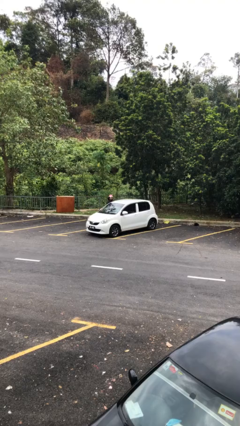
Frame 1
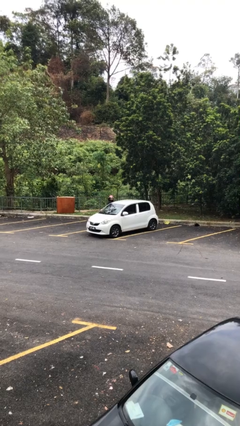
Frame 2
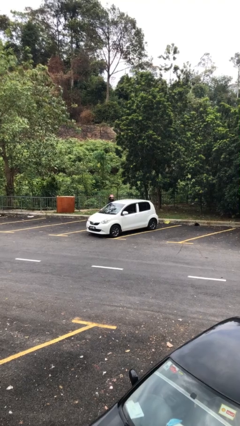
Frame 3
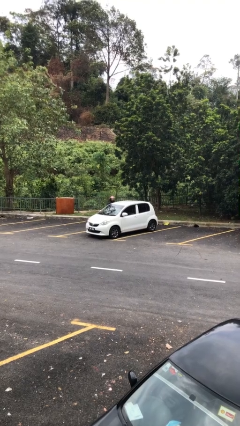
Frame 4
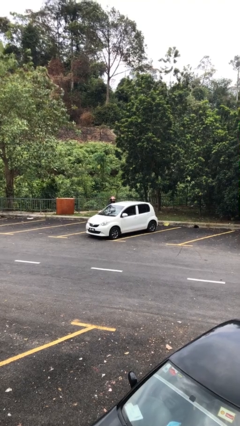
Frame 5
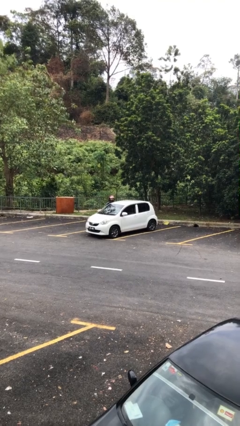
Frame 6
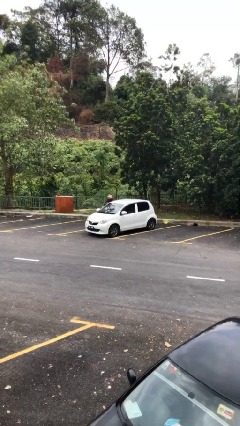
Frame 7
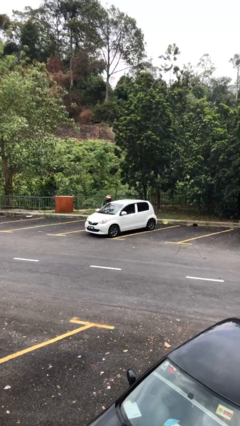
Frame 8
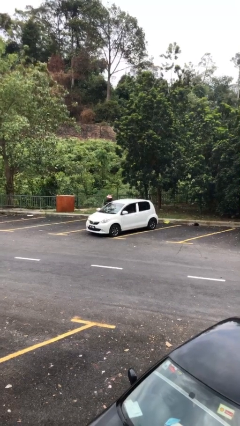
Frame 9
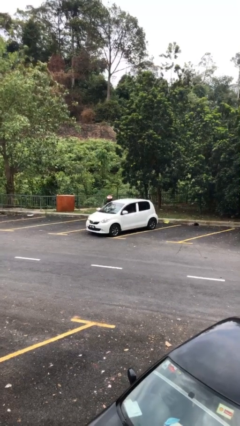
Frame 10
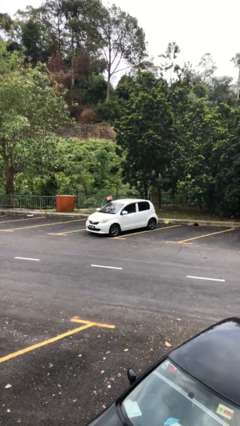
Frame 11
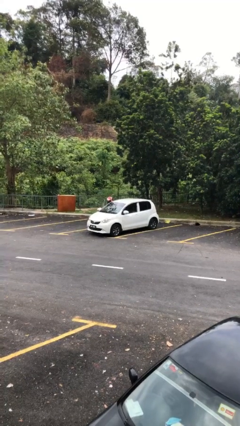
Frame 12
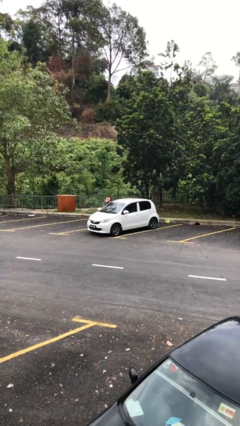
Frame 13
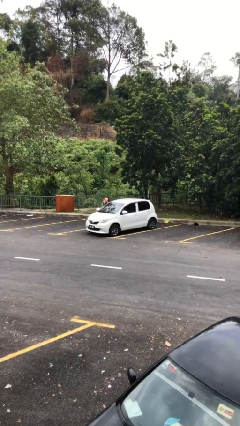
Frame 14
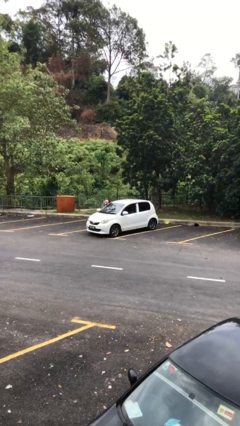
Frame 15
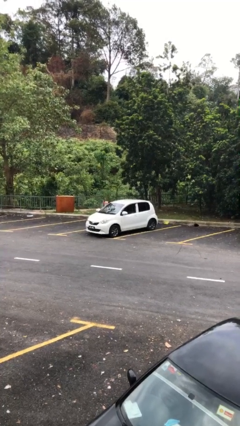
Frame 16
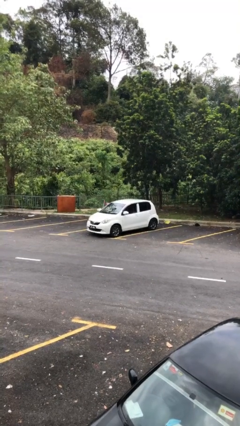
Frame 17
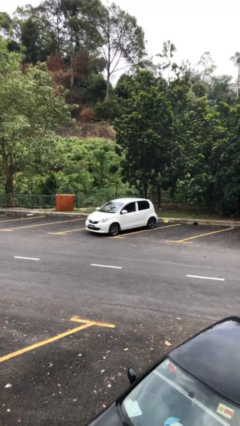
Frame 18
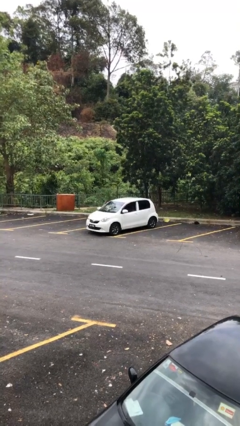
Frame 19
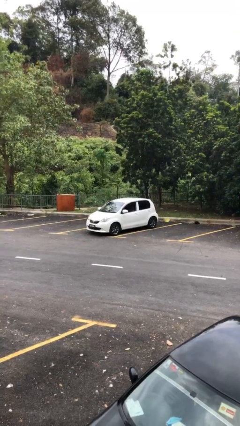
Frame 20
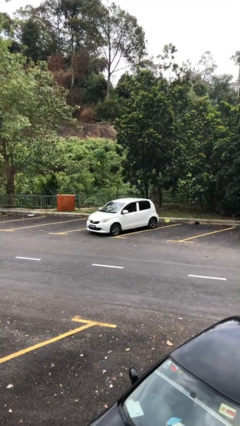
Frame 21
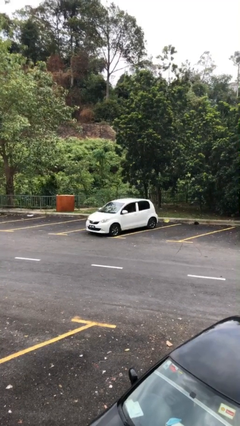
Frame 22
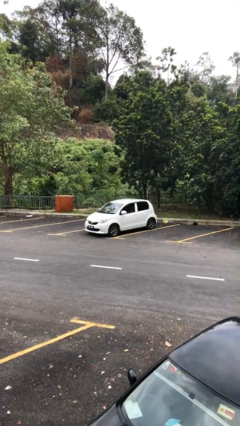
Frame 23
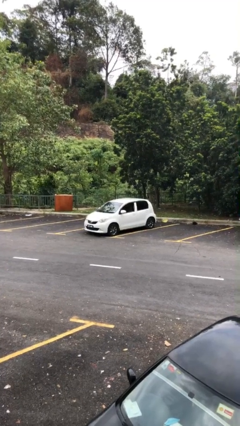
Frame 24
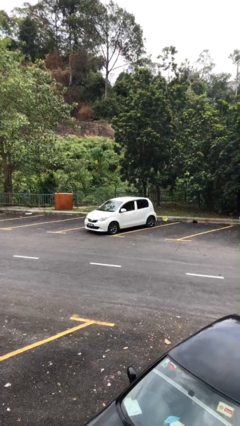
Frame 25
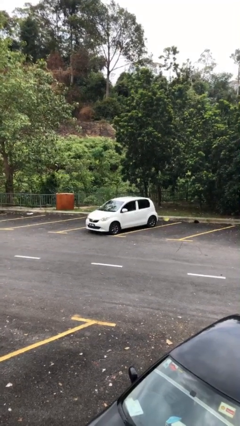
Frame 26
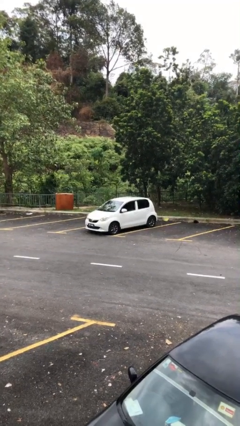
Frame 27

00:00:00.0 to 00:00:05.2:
car picks up person

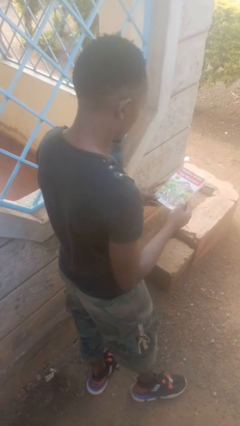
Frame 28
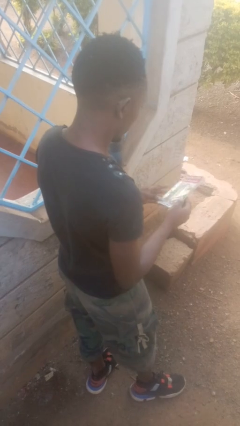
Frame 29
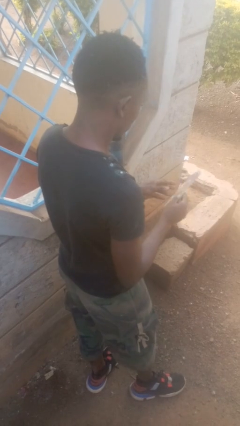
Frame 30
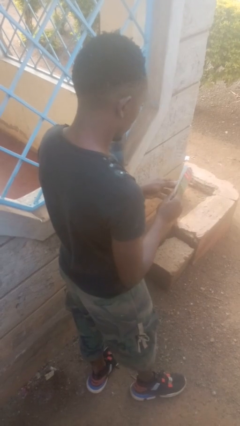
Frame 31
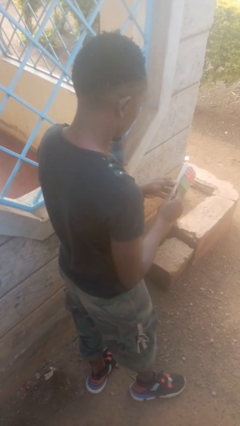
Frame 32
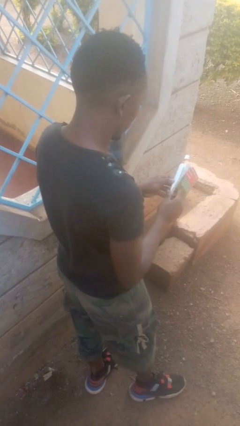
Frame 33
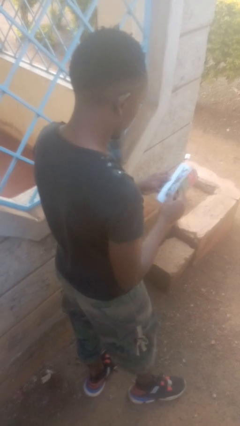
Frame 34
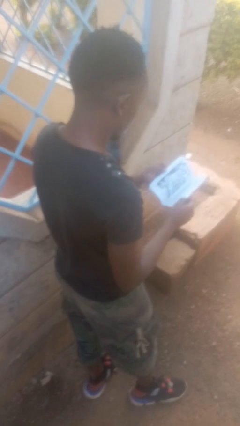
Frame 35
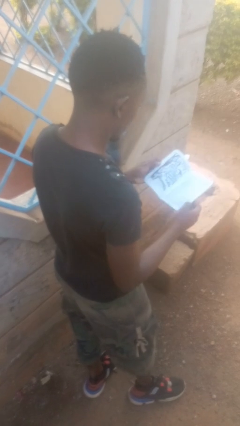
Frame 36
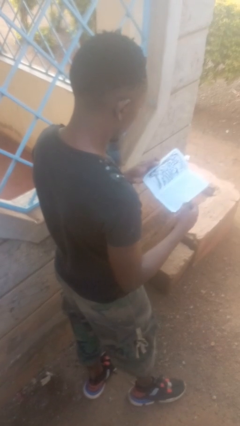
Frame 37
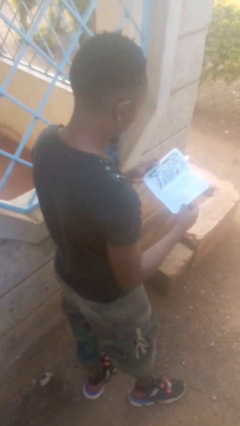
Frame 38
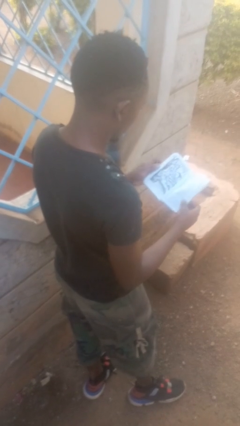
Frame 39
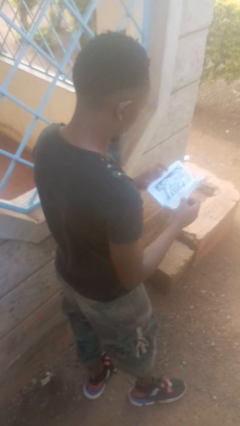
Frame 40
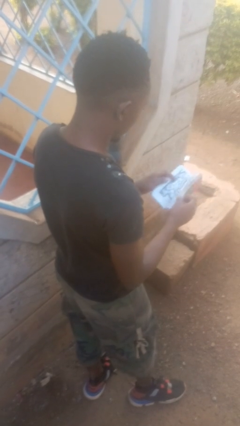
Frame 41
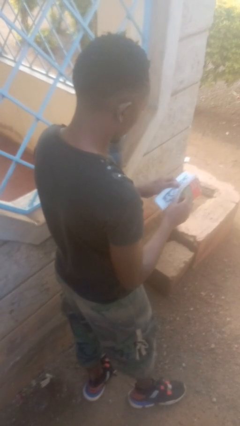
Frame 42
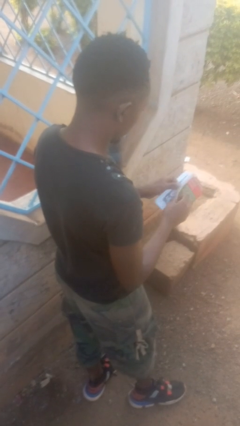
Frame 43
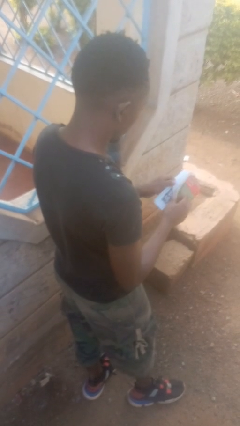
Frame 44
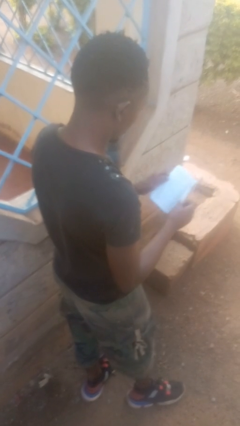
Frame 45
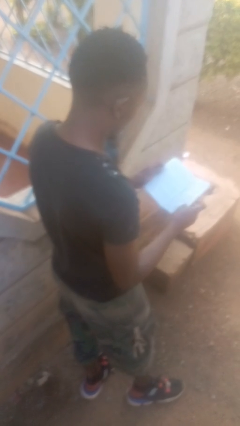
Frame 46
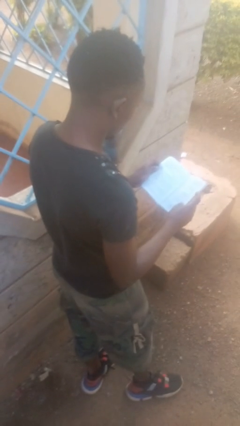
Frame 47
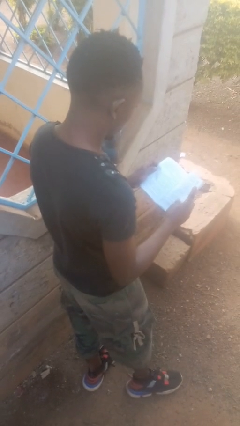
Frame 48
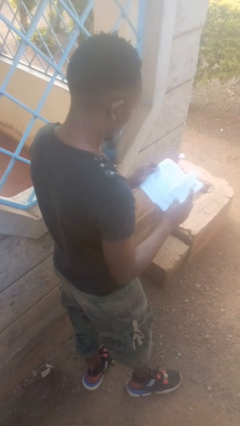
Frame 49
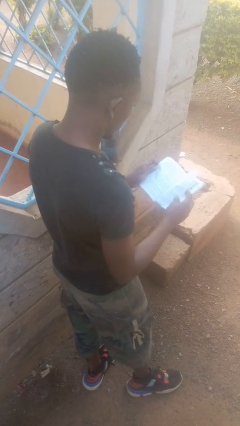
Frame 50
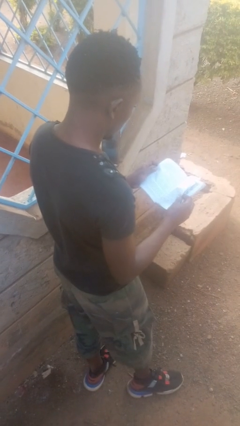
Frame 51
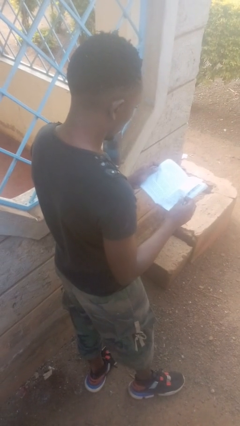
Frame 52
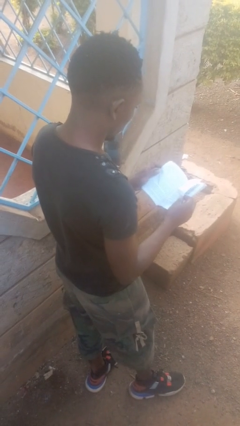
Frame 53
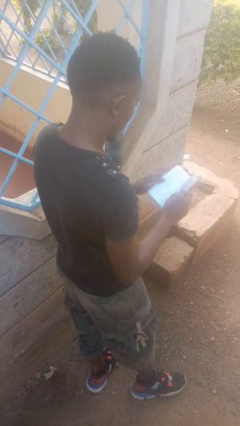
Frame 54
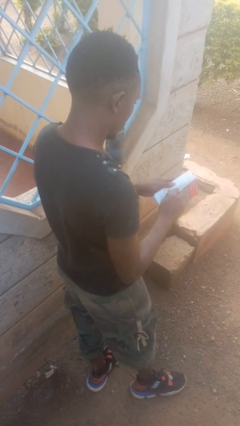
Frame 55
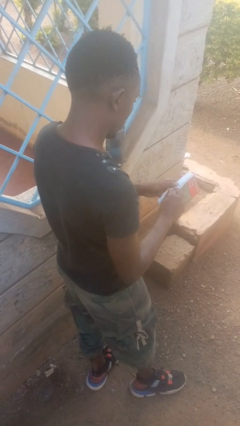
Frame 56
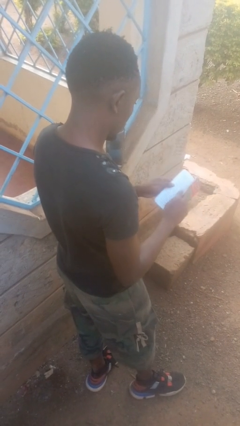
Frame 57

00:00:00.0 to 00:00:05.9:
person reads book

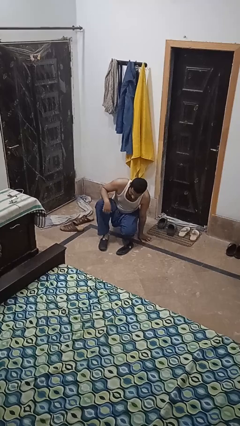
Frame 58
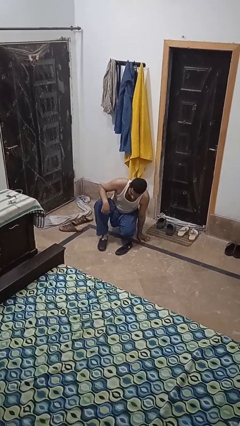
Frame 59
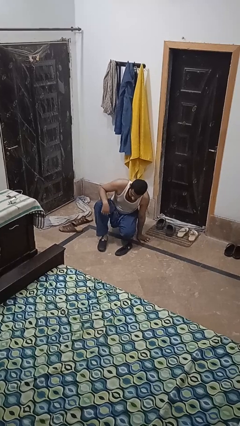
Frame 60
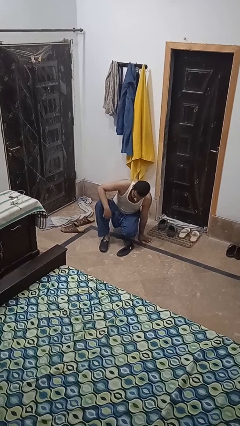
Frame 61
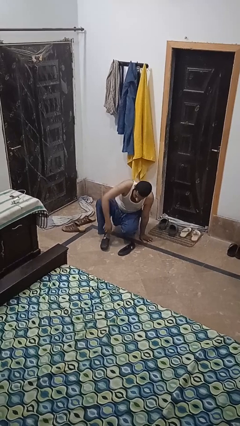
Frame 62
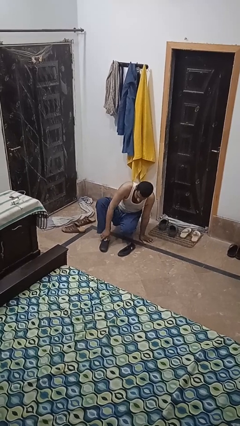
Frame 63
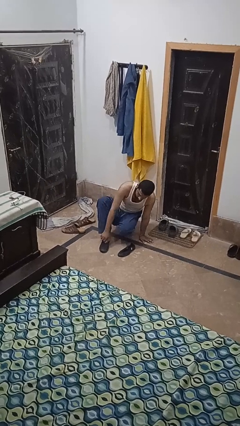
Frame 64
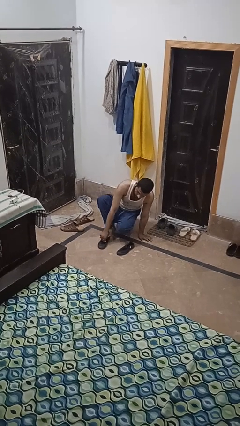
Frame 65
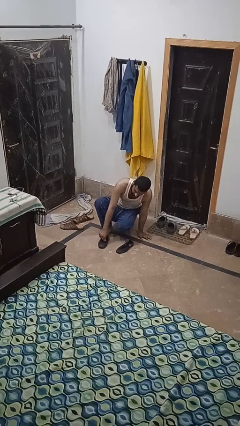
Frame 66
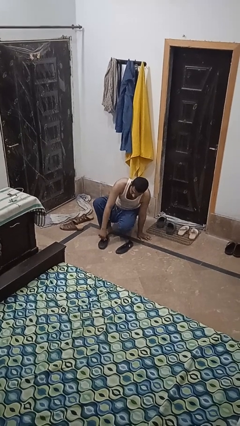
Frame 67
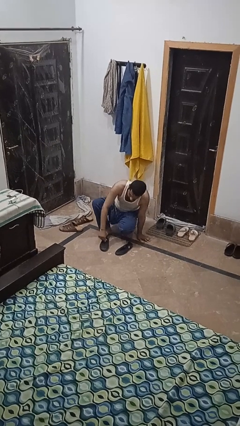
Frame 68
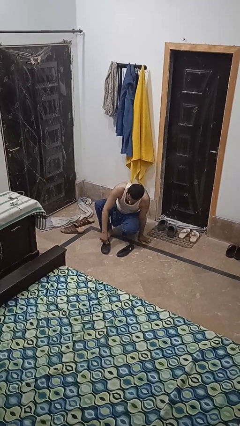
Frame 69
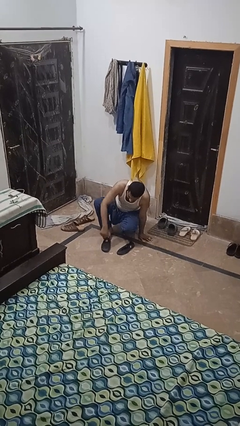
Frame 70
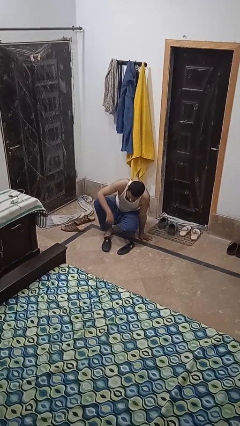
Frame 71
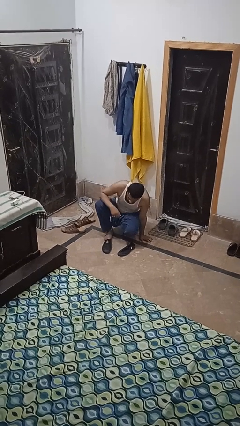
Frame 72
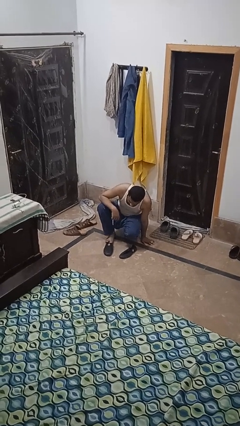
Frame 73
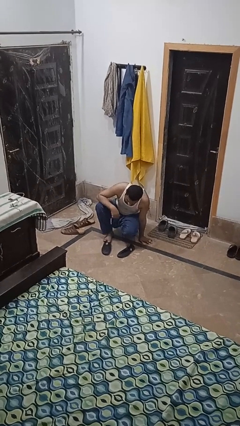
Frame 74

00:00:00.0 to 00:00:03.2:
person takes off shoes

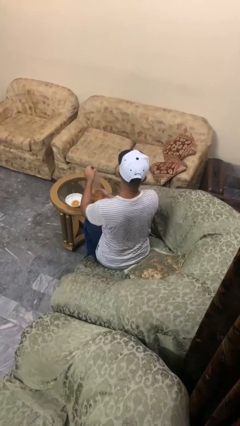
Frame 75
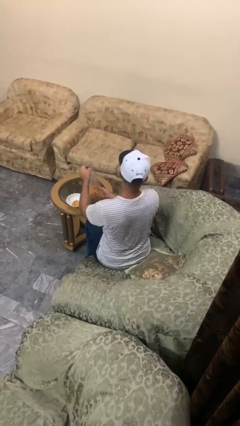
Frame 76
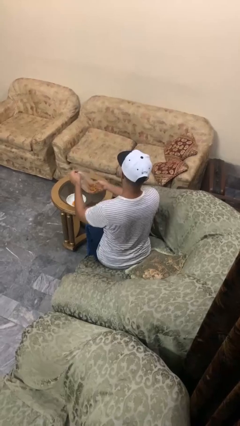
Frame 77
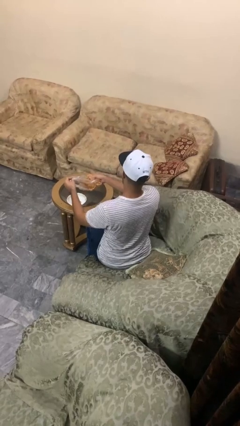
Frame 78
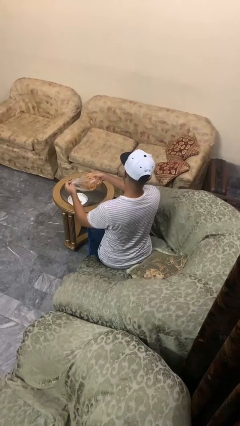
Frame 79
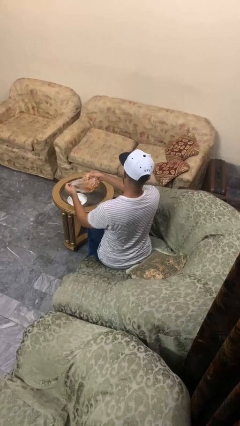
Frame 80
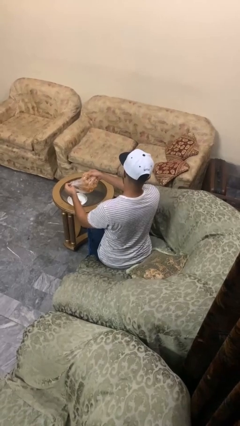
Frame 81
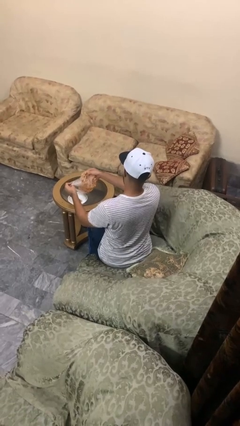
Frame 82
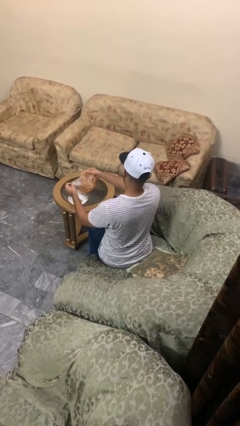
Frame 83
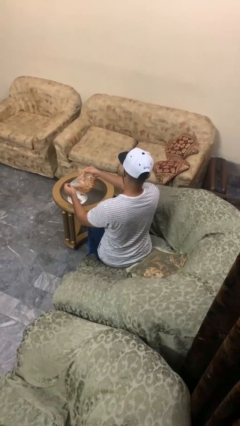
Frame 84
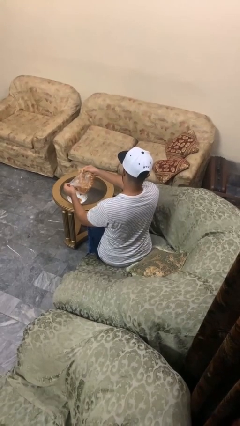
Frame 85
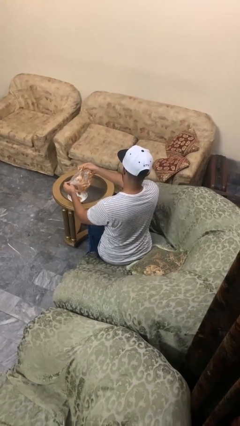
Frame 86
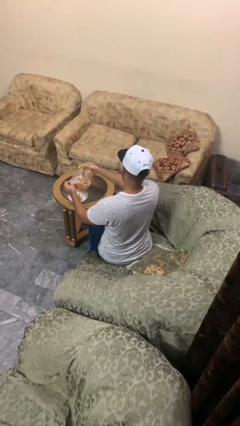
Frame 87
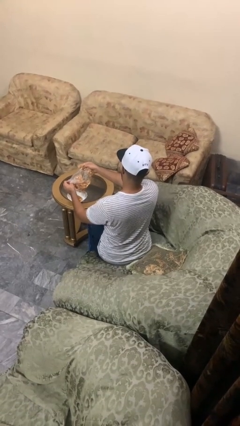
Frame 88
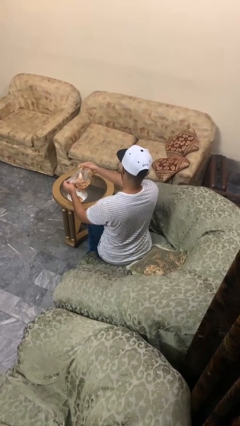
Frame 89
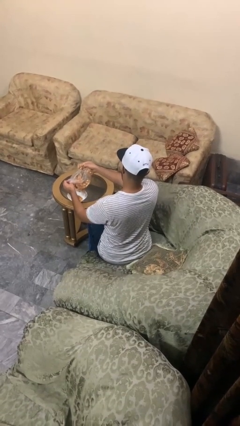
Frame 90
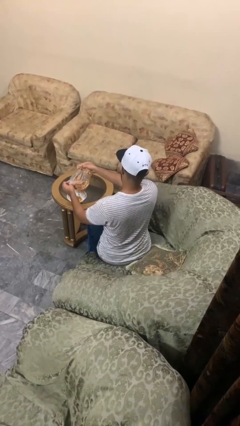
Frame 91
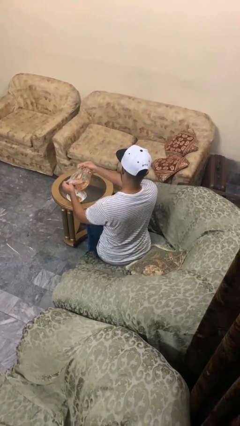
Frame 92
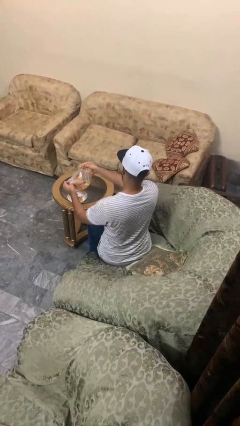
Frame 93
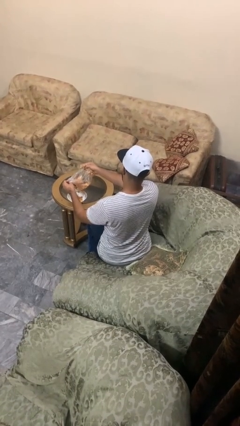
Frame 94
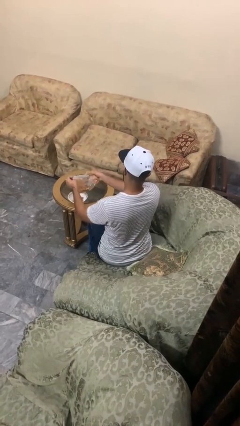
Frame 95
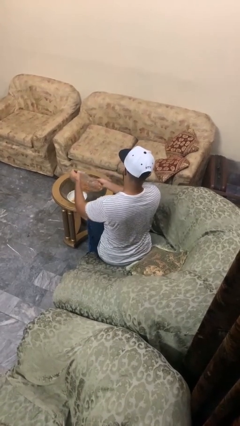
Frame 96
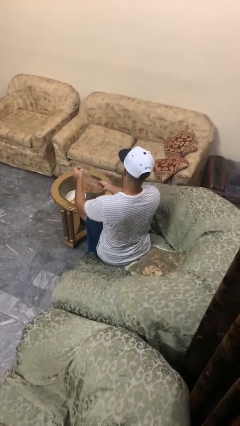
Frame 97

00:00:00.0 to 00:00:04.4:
person pours into bowl
